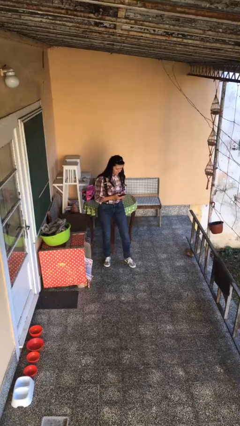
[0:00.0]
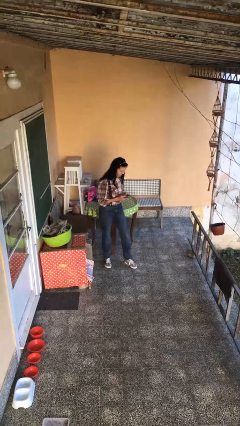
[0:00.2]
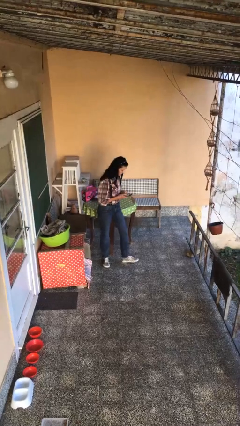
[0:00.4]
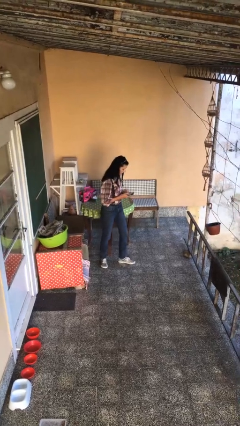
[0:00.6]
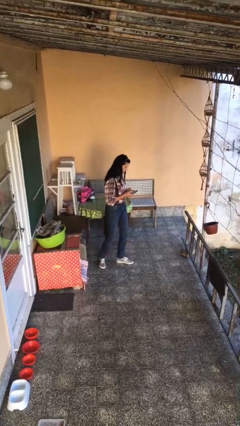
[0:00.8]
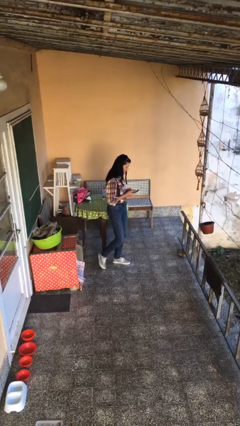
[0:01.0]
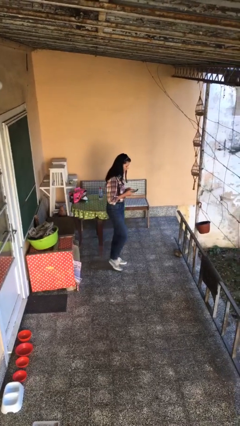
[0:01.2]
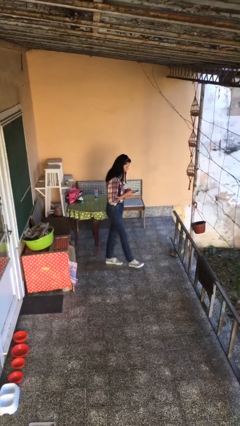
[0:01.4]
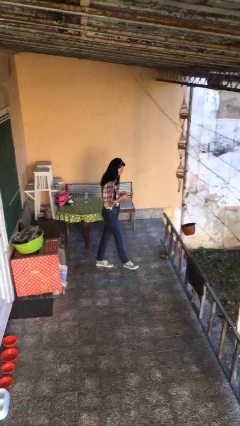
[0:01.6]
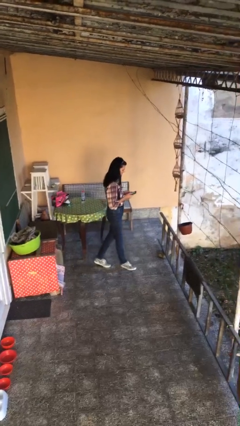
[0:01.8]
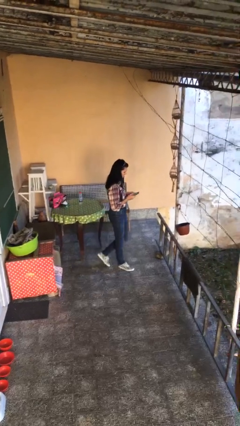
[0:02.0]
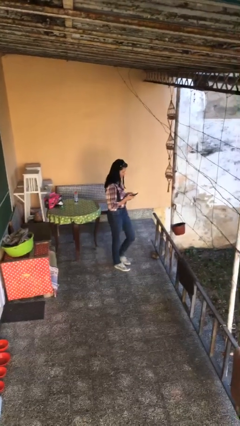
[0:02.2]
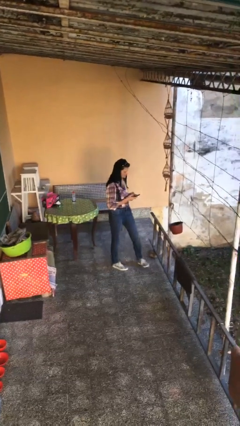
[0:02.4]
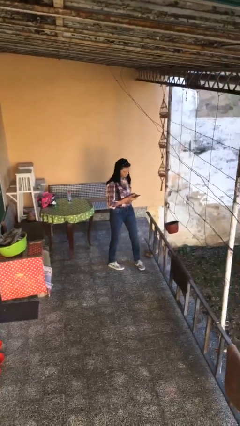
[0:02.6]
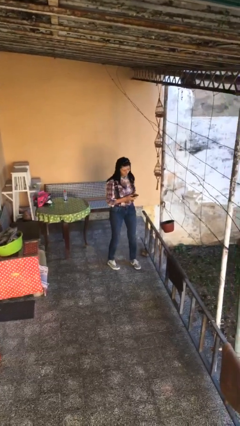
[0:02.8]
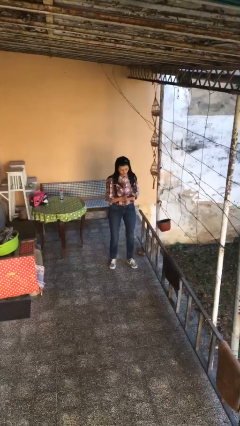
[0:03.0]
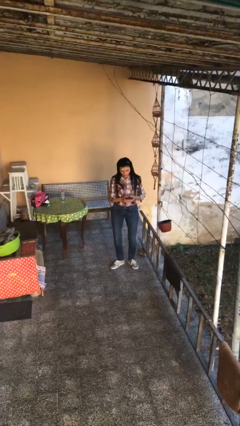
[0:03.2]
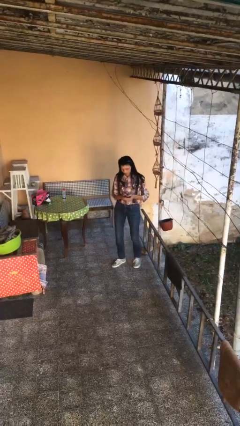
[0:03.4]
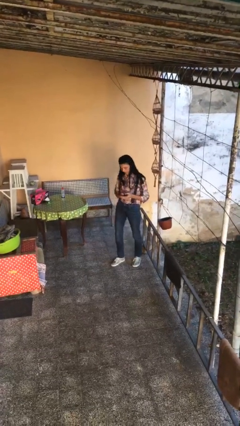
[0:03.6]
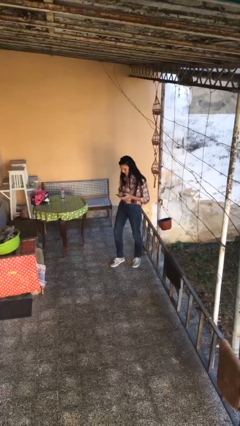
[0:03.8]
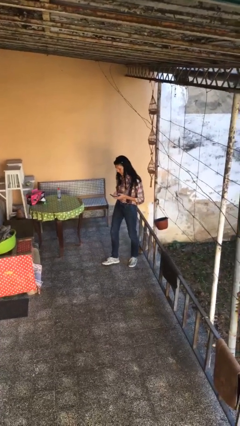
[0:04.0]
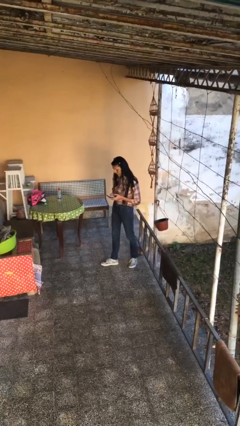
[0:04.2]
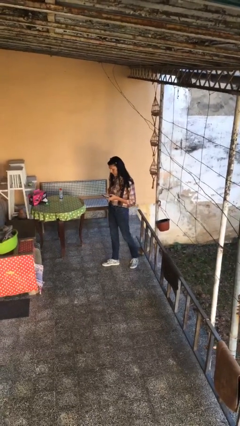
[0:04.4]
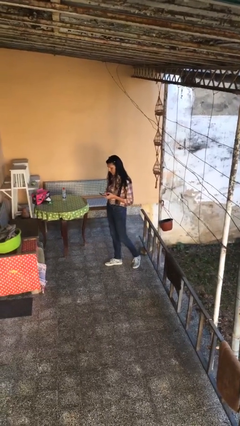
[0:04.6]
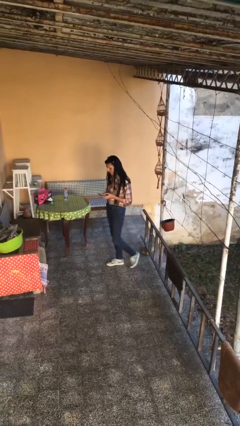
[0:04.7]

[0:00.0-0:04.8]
person texts on phone

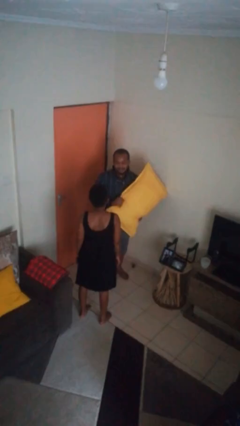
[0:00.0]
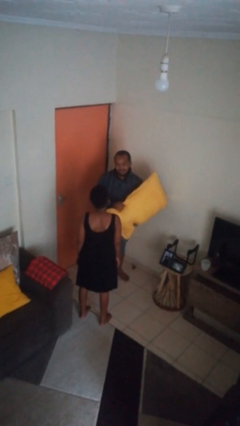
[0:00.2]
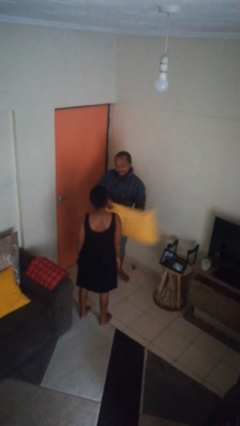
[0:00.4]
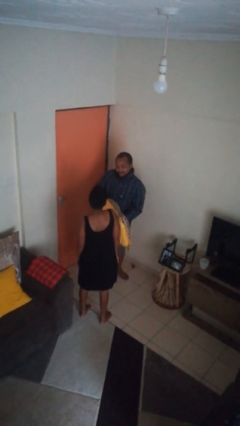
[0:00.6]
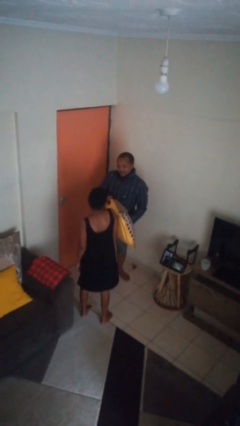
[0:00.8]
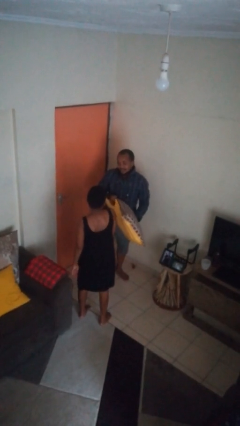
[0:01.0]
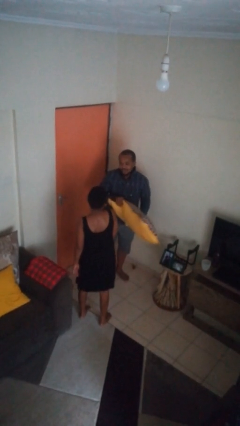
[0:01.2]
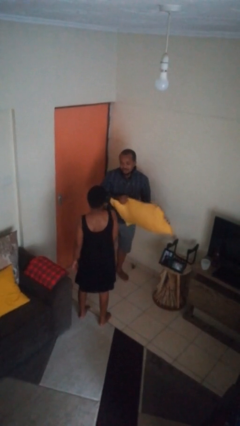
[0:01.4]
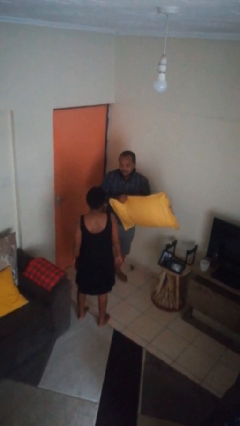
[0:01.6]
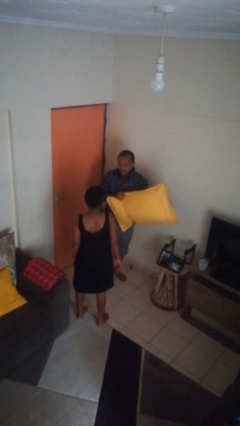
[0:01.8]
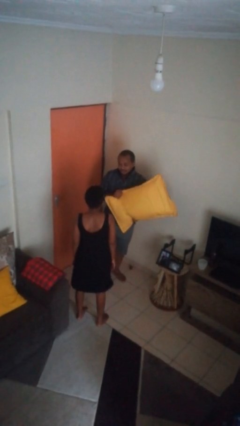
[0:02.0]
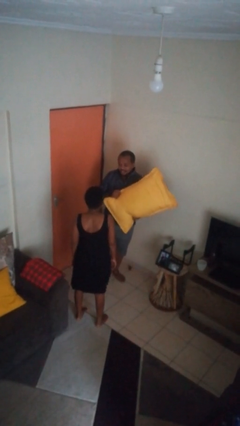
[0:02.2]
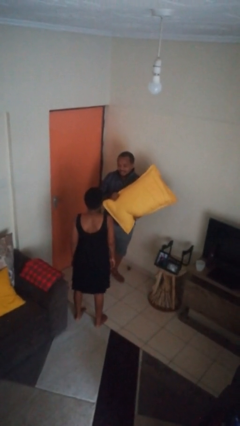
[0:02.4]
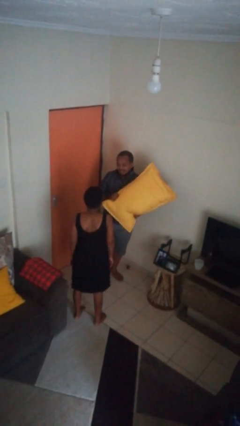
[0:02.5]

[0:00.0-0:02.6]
person hits person with pillow

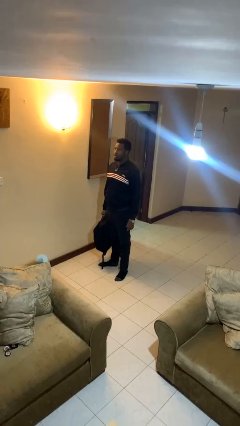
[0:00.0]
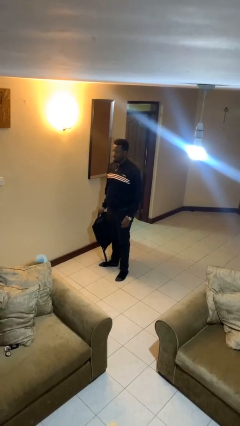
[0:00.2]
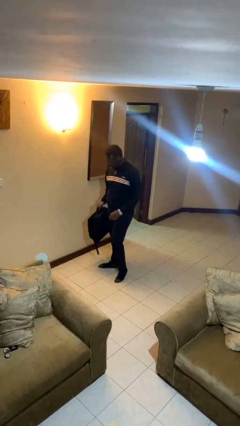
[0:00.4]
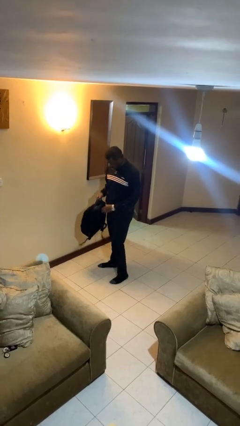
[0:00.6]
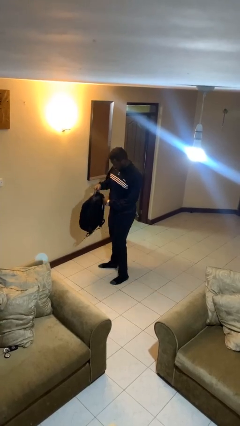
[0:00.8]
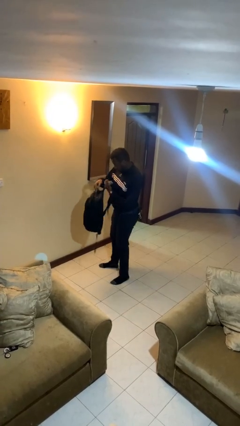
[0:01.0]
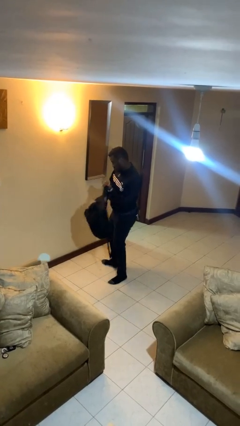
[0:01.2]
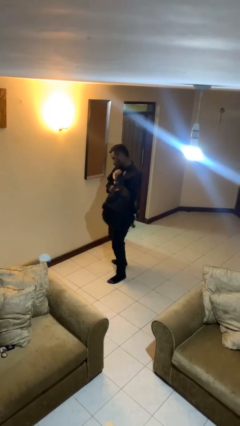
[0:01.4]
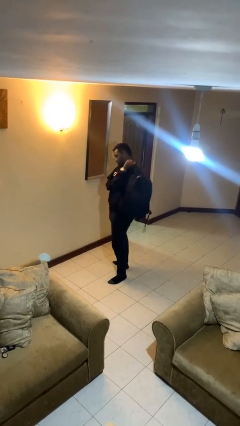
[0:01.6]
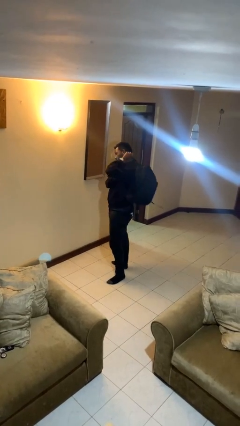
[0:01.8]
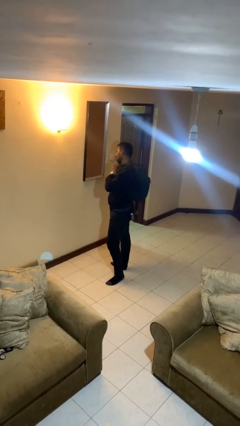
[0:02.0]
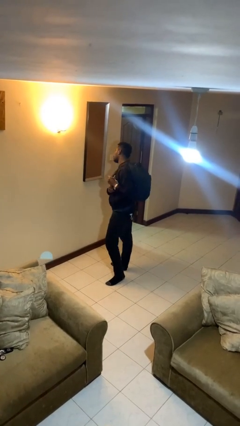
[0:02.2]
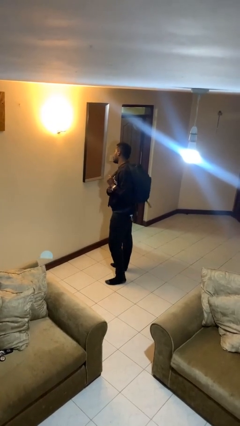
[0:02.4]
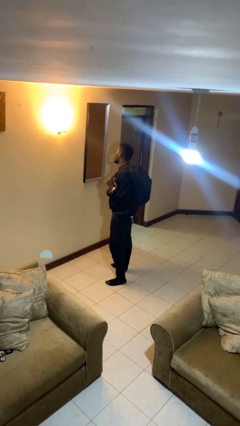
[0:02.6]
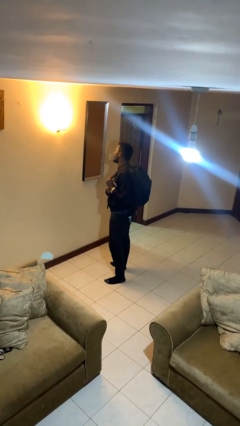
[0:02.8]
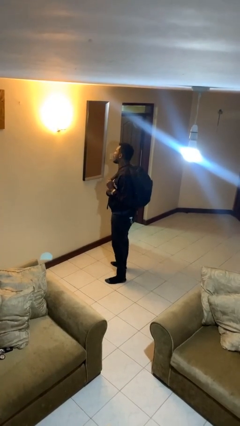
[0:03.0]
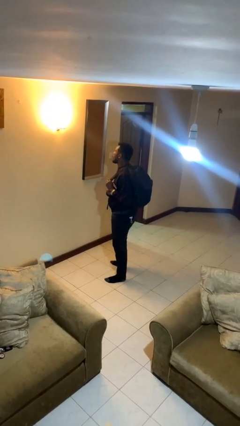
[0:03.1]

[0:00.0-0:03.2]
person puts on backpack

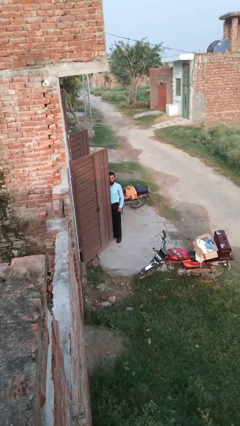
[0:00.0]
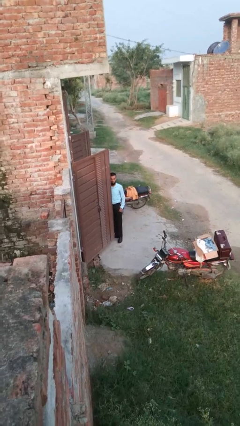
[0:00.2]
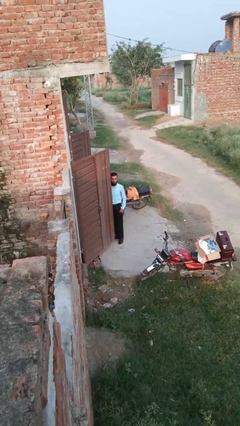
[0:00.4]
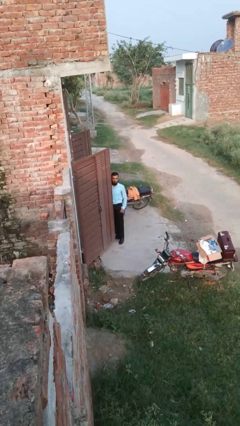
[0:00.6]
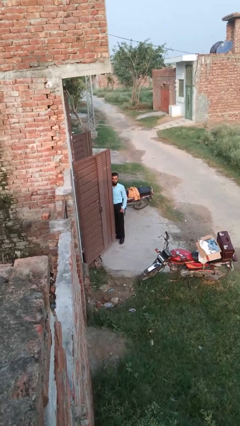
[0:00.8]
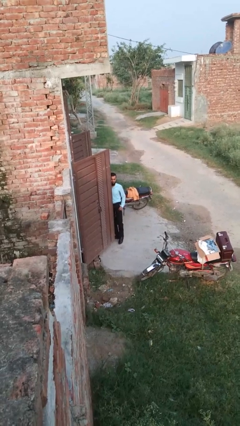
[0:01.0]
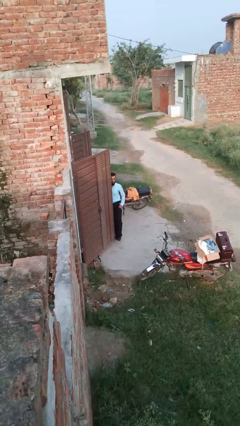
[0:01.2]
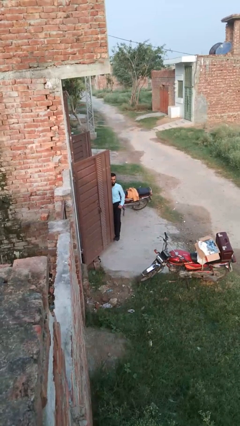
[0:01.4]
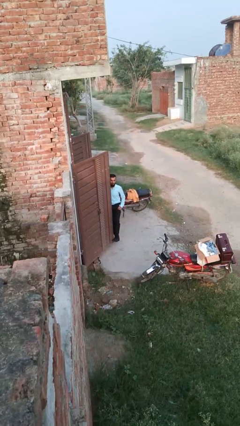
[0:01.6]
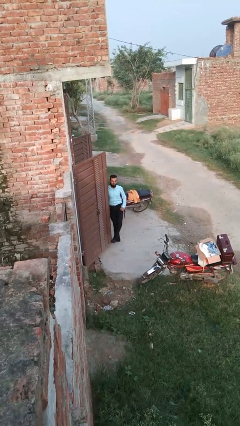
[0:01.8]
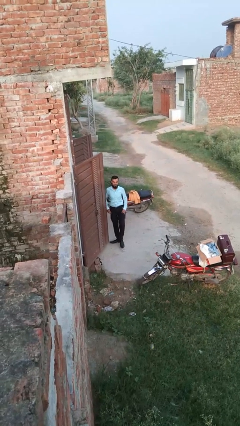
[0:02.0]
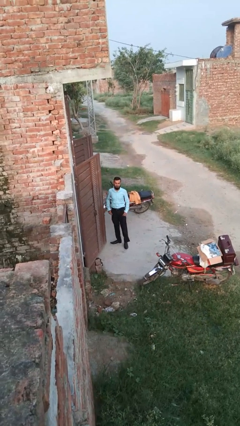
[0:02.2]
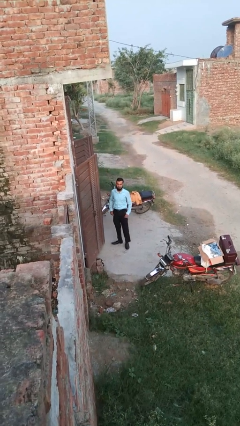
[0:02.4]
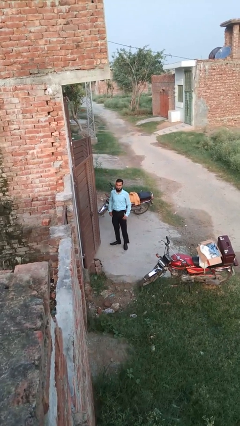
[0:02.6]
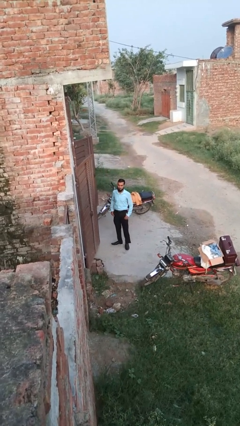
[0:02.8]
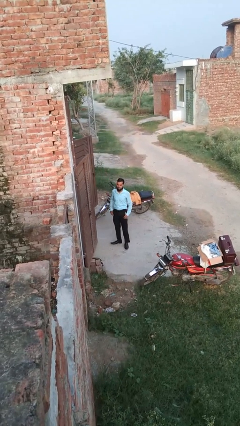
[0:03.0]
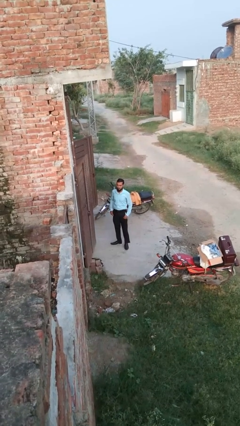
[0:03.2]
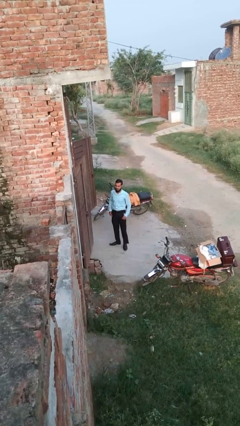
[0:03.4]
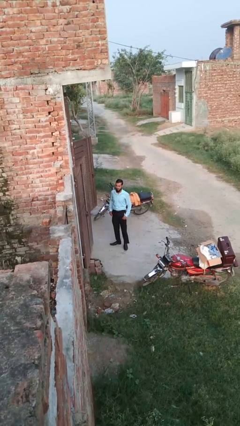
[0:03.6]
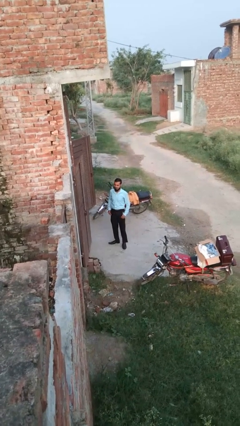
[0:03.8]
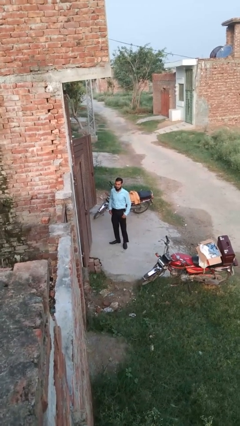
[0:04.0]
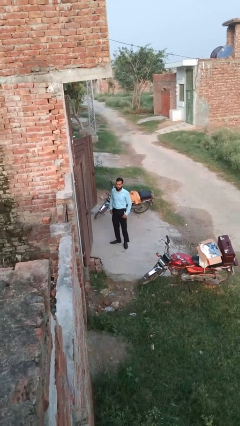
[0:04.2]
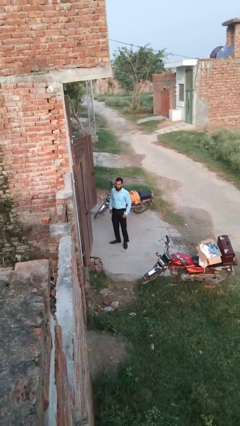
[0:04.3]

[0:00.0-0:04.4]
person closes door with foot

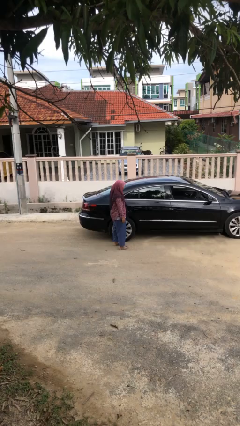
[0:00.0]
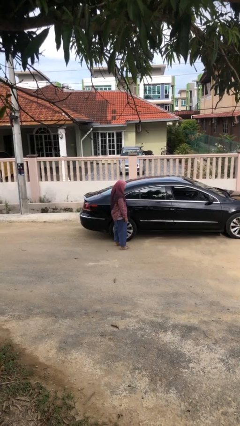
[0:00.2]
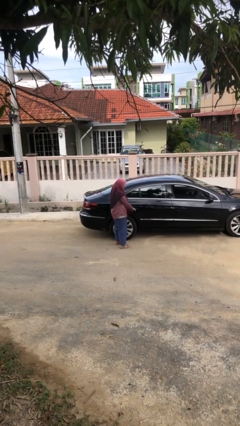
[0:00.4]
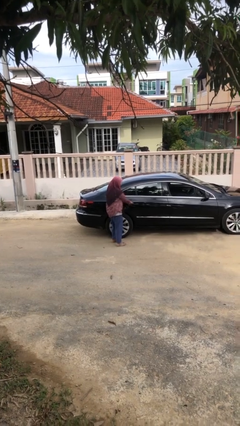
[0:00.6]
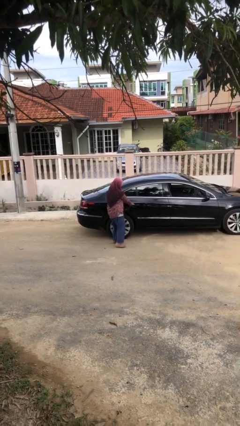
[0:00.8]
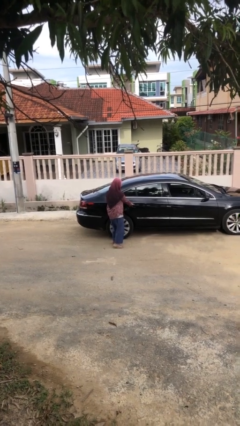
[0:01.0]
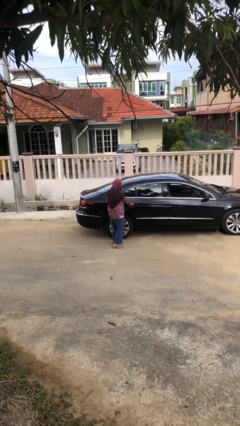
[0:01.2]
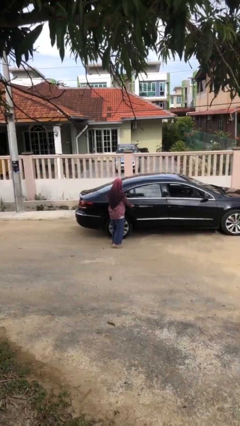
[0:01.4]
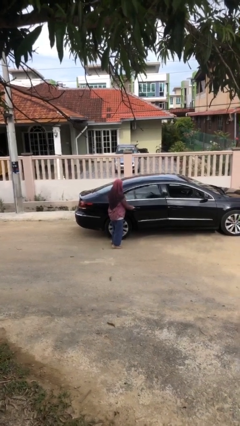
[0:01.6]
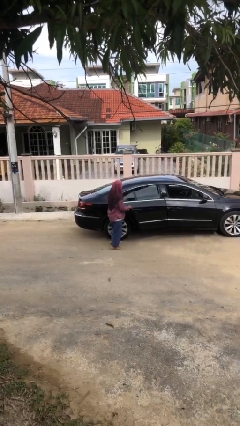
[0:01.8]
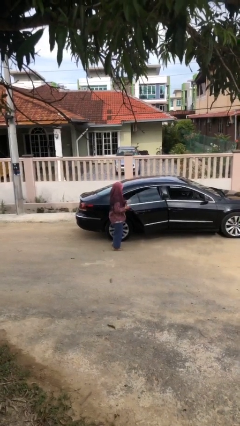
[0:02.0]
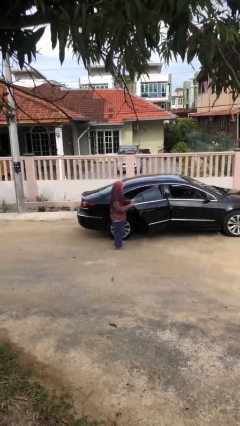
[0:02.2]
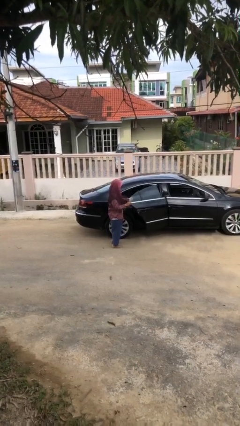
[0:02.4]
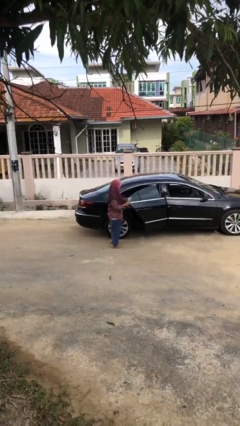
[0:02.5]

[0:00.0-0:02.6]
person opens car door
